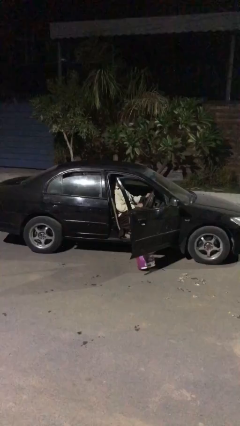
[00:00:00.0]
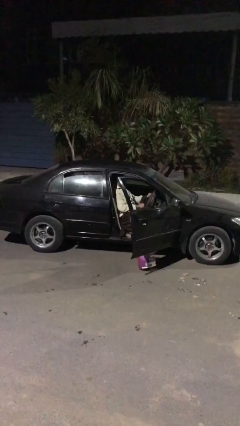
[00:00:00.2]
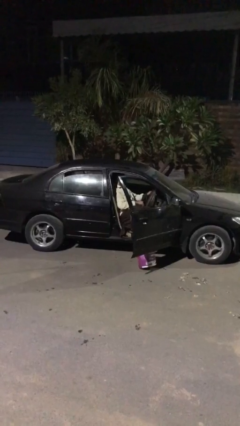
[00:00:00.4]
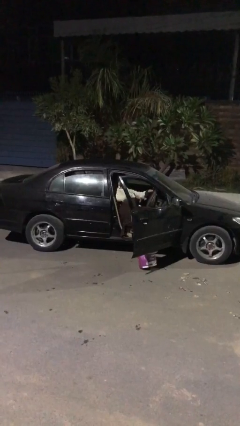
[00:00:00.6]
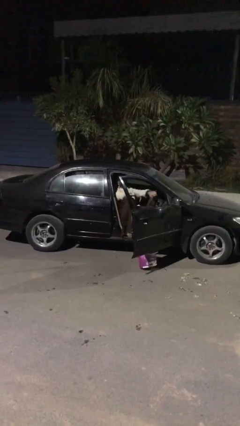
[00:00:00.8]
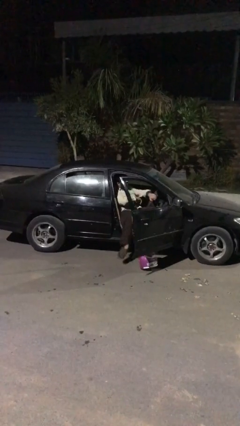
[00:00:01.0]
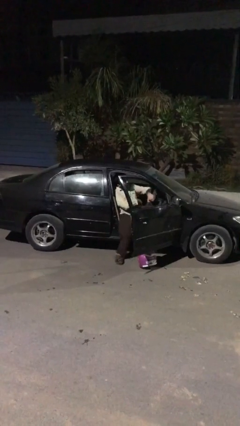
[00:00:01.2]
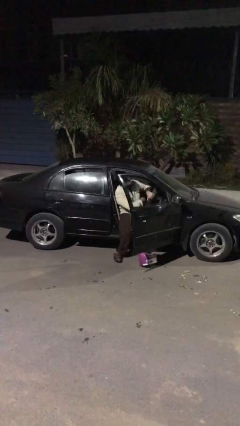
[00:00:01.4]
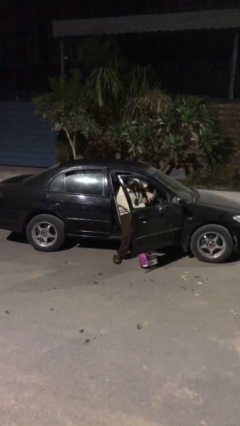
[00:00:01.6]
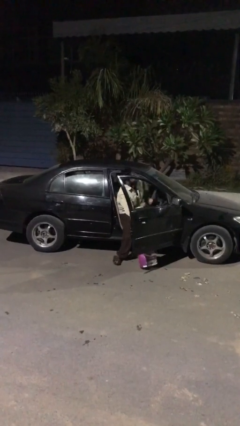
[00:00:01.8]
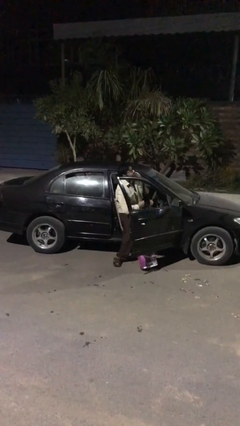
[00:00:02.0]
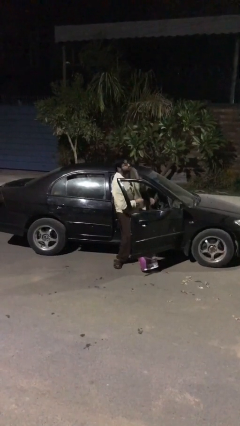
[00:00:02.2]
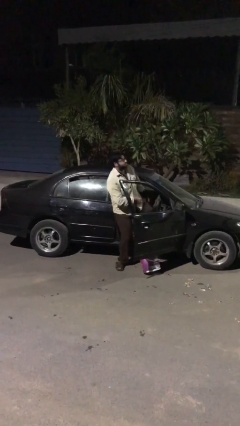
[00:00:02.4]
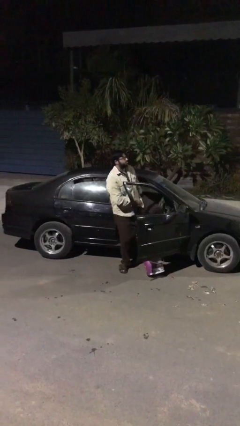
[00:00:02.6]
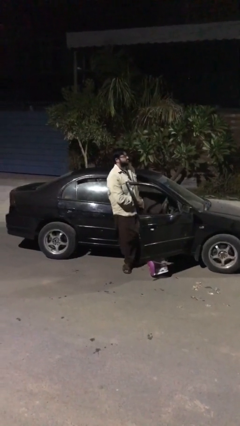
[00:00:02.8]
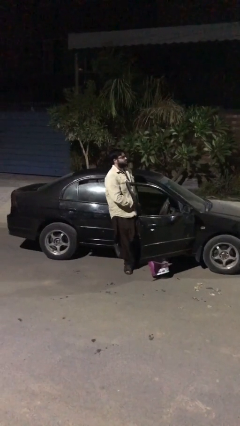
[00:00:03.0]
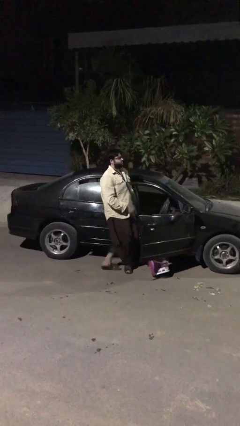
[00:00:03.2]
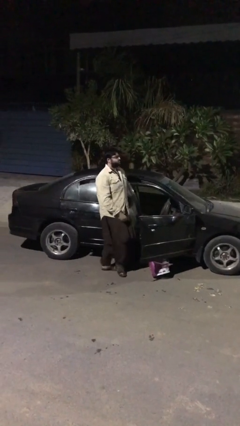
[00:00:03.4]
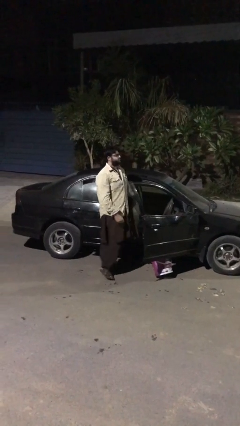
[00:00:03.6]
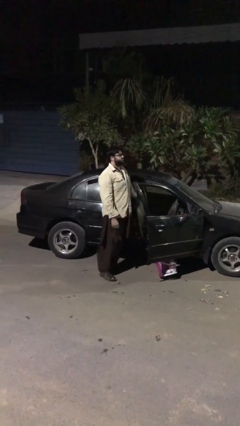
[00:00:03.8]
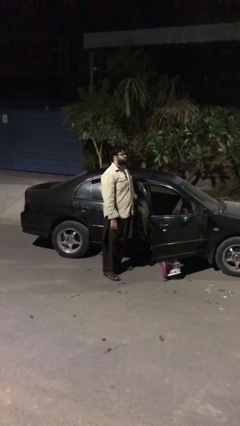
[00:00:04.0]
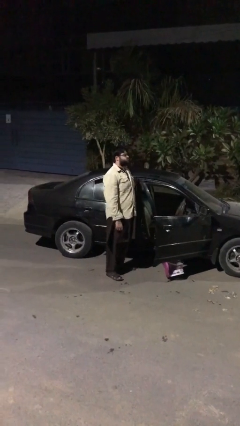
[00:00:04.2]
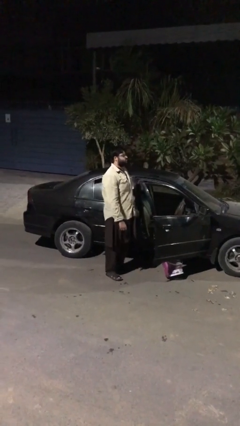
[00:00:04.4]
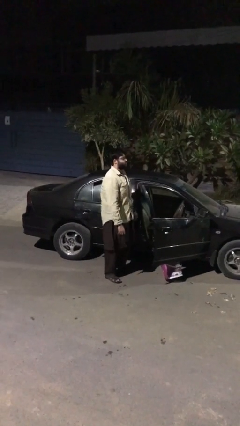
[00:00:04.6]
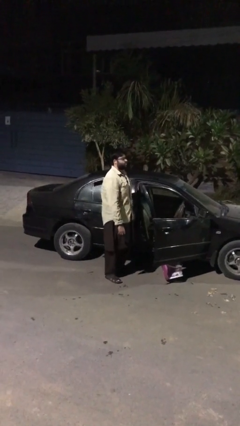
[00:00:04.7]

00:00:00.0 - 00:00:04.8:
person exits car

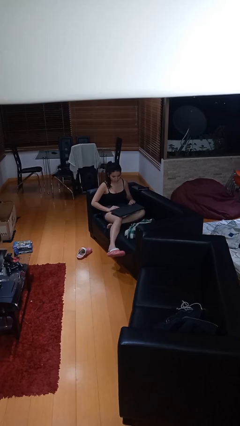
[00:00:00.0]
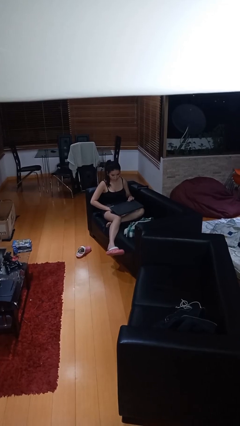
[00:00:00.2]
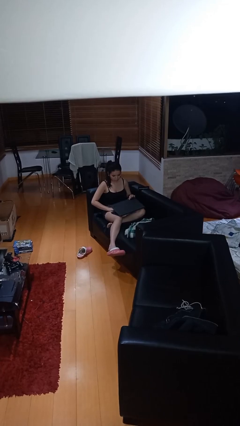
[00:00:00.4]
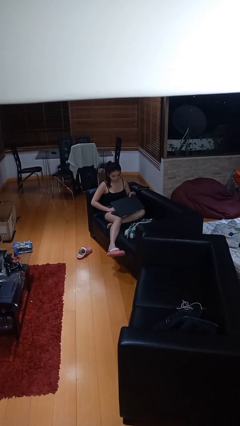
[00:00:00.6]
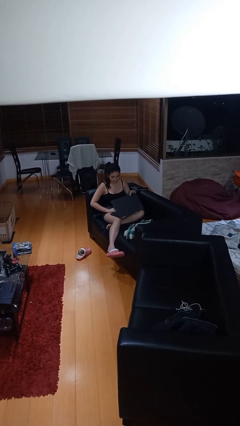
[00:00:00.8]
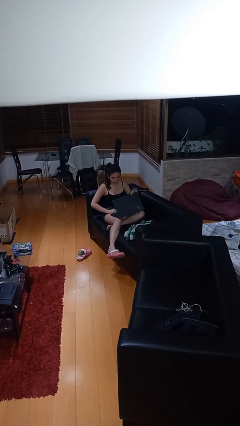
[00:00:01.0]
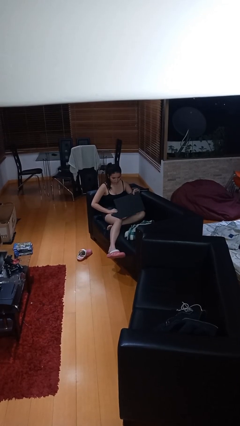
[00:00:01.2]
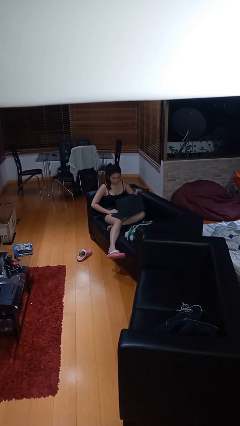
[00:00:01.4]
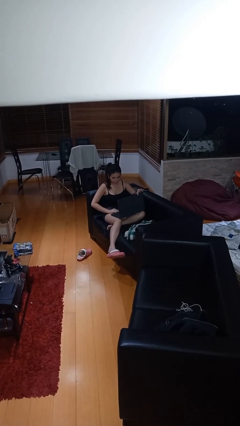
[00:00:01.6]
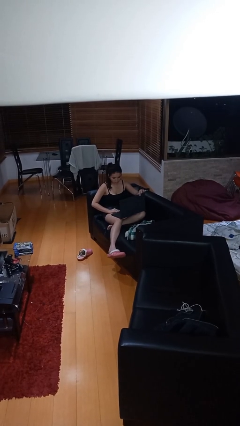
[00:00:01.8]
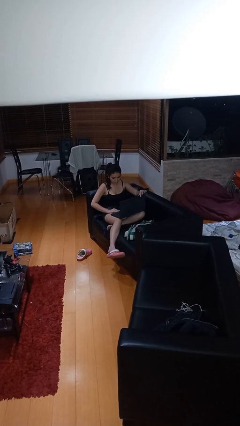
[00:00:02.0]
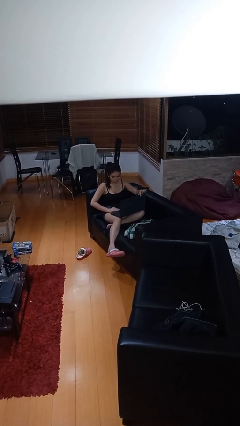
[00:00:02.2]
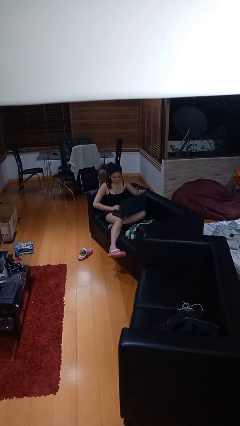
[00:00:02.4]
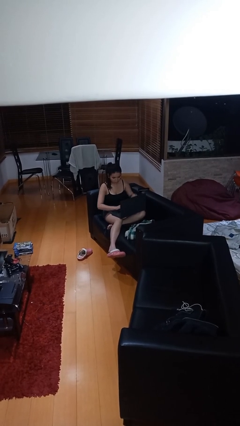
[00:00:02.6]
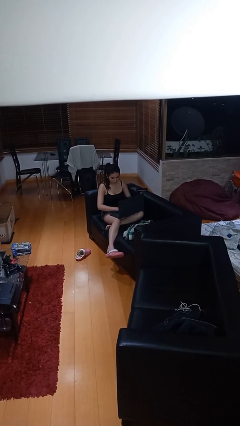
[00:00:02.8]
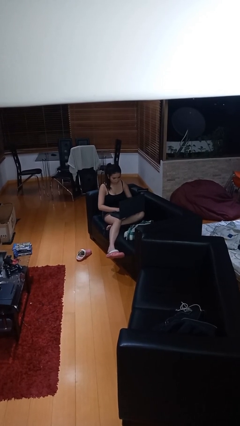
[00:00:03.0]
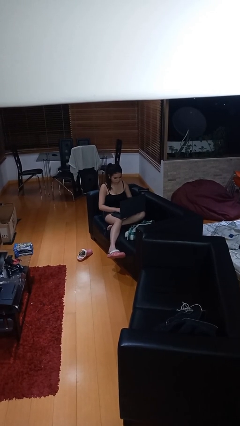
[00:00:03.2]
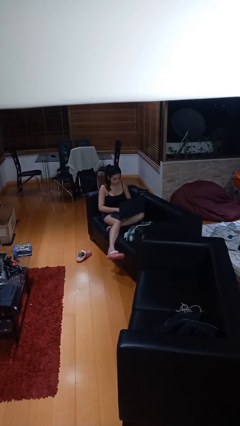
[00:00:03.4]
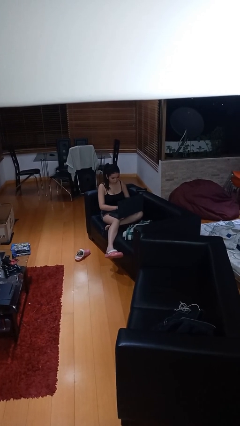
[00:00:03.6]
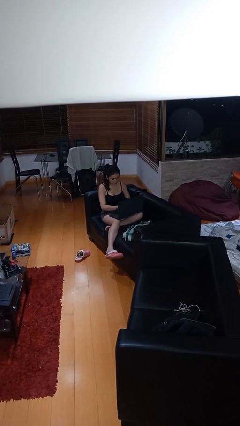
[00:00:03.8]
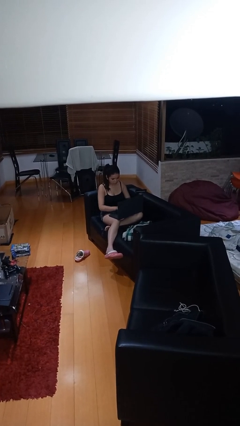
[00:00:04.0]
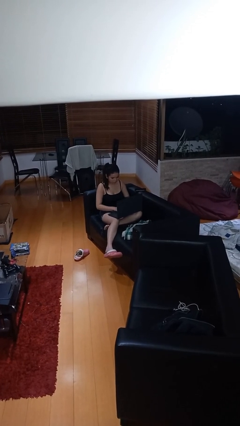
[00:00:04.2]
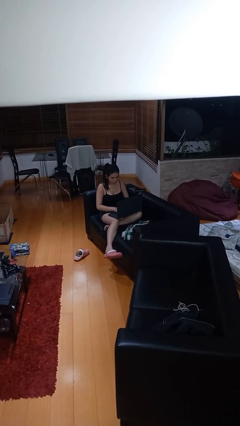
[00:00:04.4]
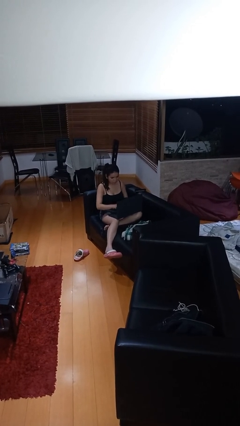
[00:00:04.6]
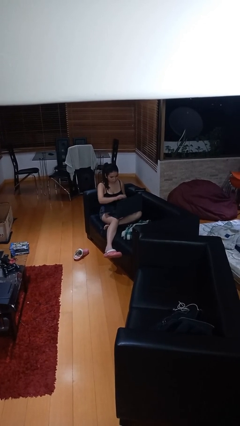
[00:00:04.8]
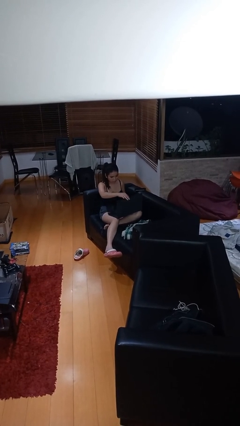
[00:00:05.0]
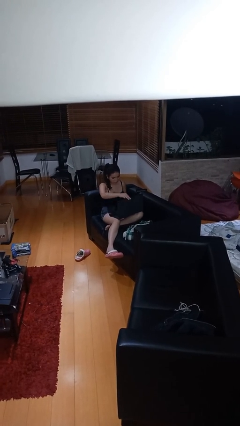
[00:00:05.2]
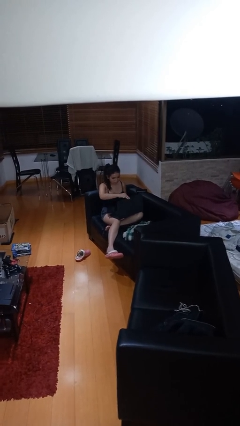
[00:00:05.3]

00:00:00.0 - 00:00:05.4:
person interacts with laptop

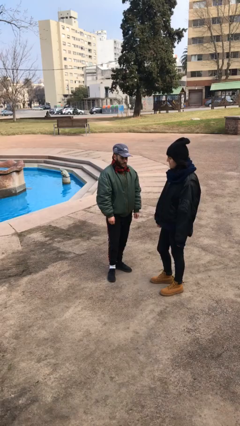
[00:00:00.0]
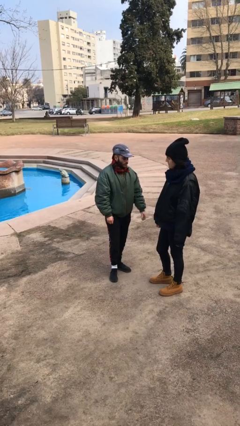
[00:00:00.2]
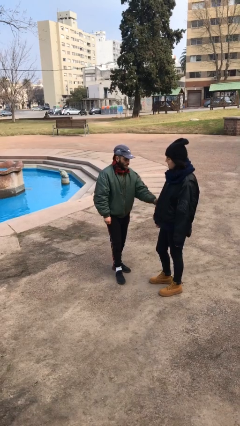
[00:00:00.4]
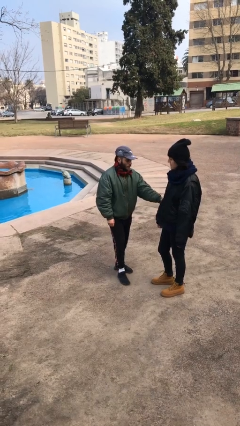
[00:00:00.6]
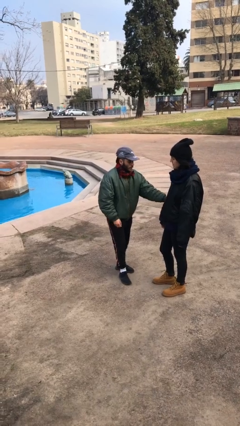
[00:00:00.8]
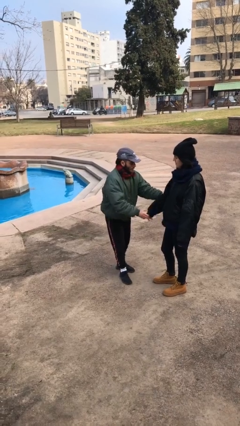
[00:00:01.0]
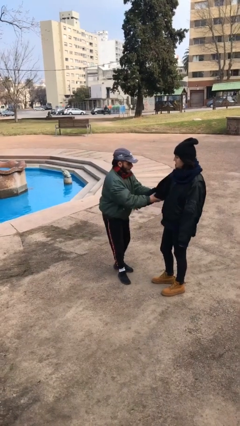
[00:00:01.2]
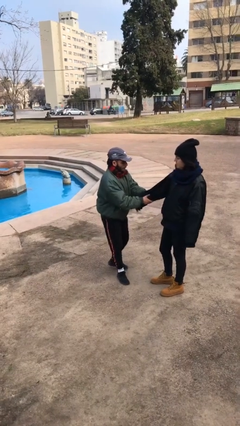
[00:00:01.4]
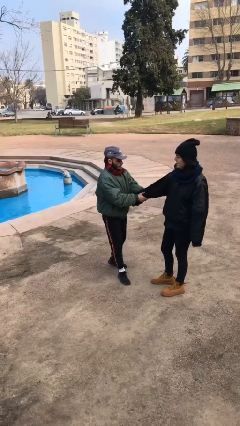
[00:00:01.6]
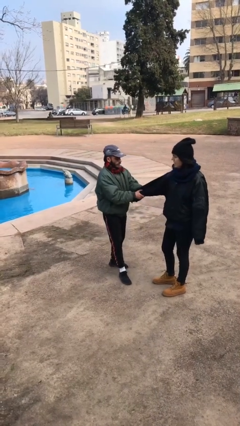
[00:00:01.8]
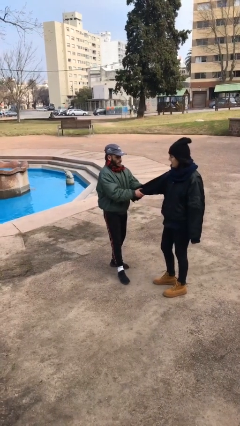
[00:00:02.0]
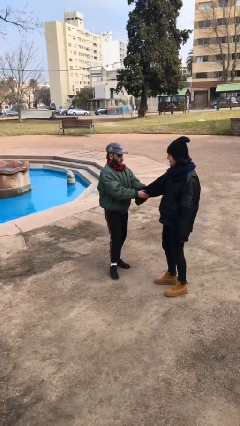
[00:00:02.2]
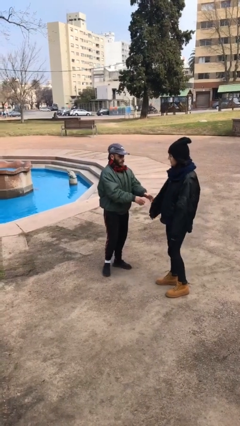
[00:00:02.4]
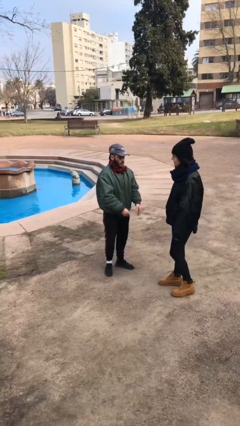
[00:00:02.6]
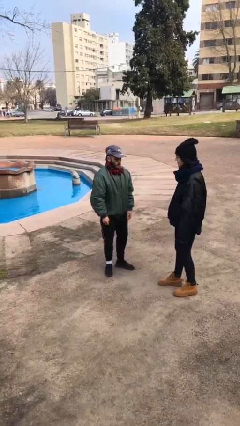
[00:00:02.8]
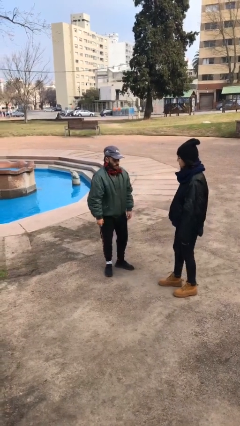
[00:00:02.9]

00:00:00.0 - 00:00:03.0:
person grabs person by forearm

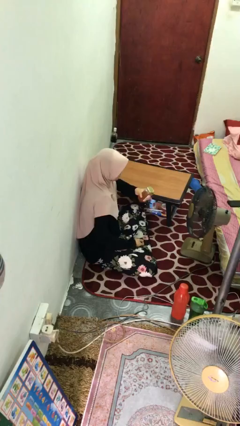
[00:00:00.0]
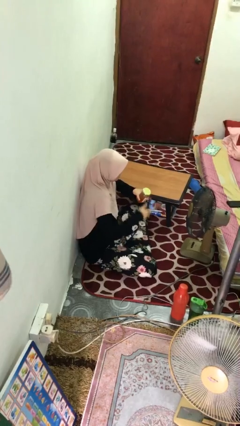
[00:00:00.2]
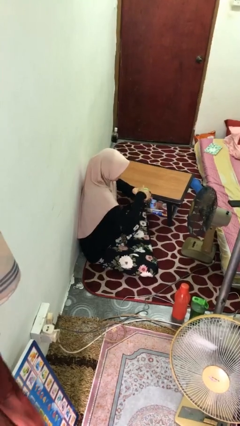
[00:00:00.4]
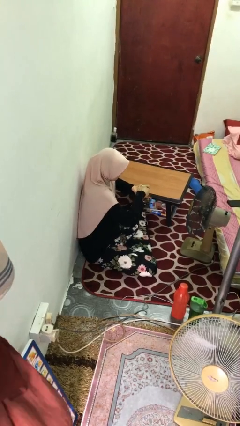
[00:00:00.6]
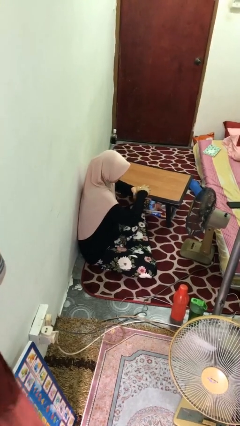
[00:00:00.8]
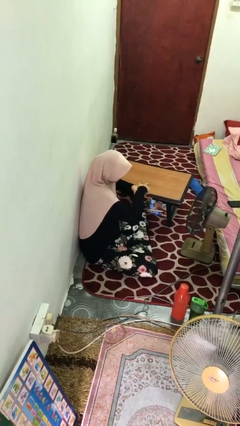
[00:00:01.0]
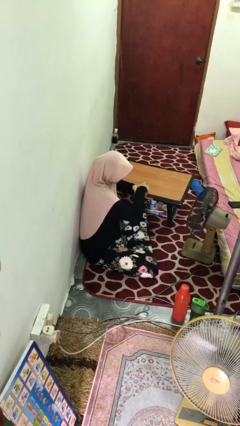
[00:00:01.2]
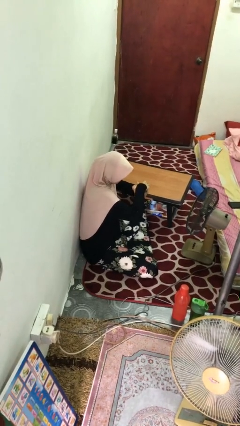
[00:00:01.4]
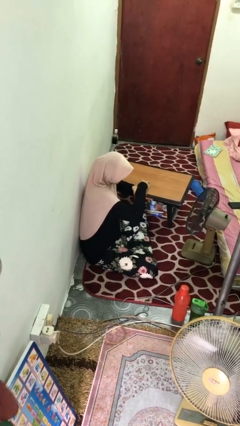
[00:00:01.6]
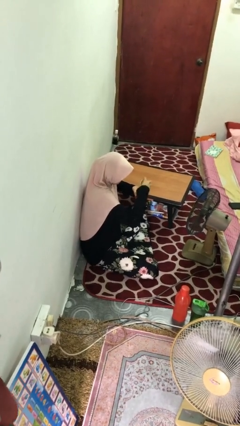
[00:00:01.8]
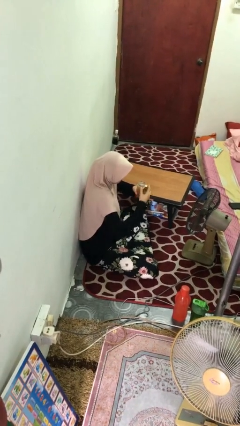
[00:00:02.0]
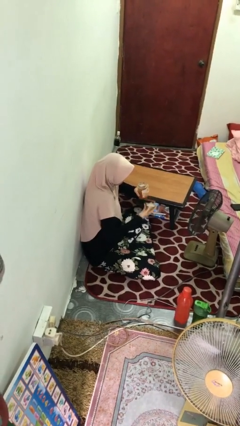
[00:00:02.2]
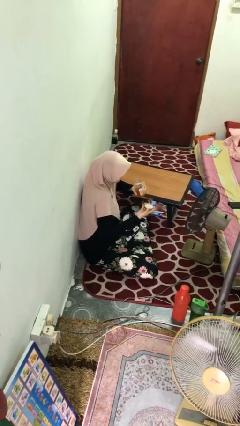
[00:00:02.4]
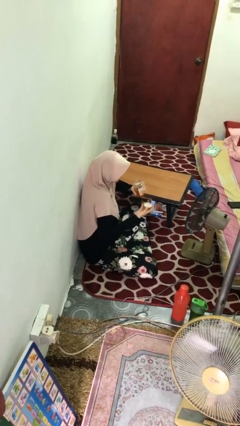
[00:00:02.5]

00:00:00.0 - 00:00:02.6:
person opens jar
